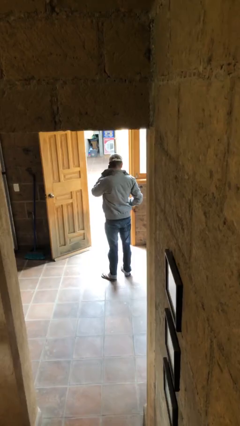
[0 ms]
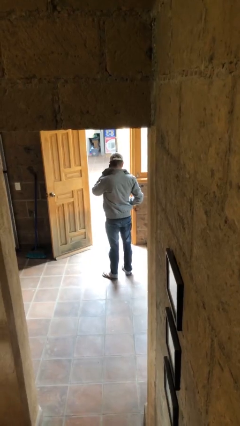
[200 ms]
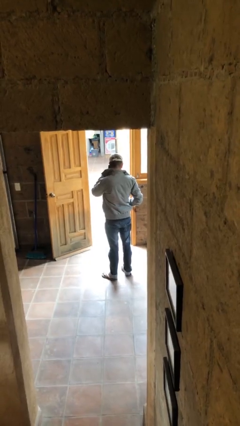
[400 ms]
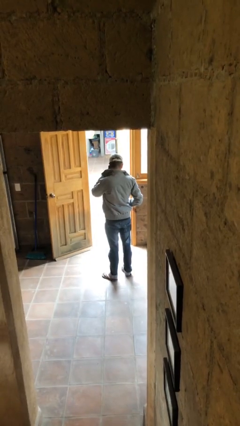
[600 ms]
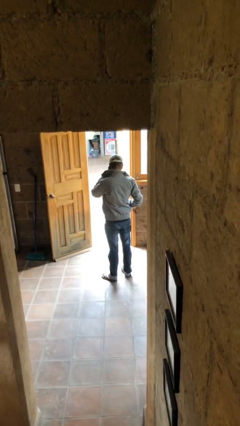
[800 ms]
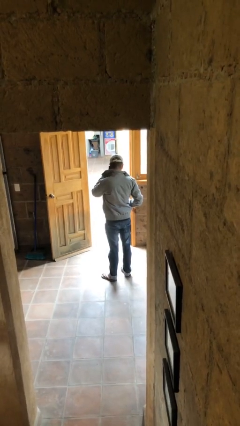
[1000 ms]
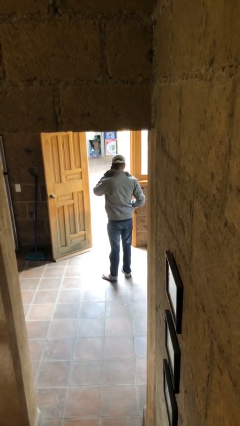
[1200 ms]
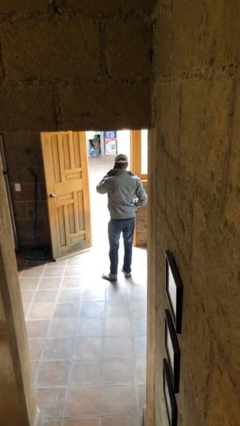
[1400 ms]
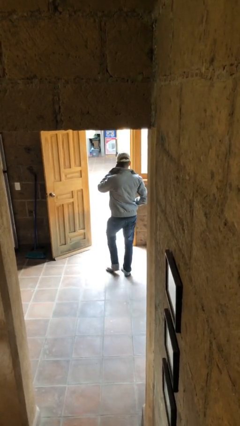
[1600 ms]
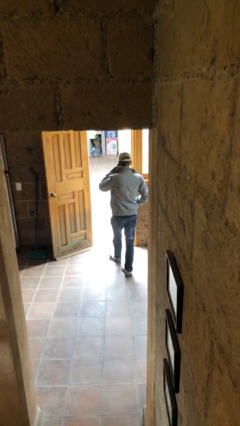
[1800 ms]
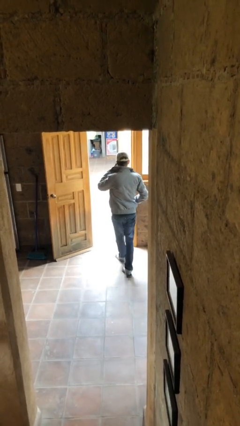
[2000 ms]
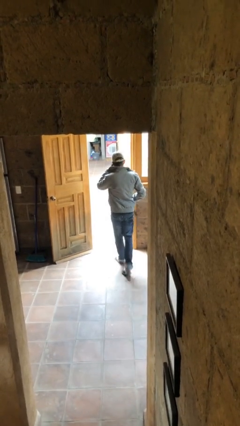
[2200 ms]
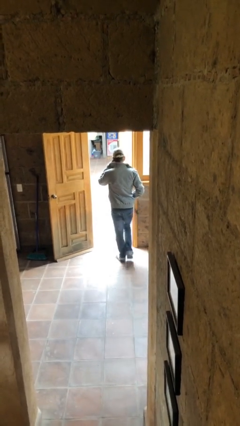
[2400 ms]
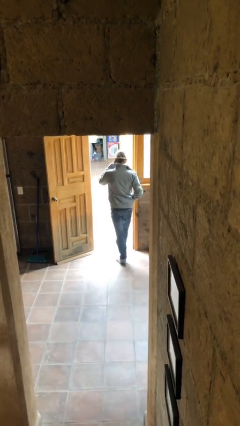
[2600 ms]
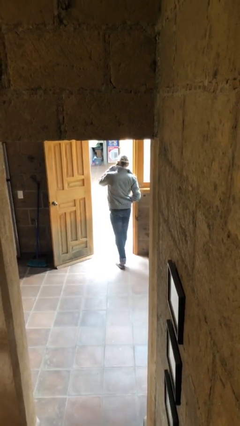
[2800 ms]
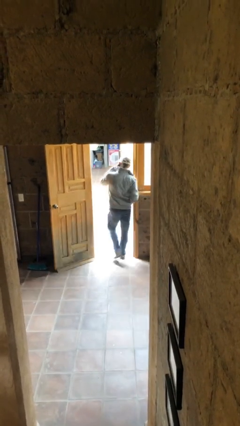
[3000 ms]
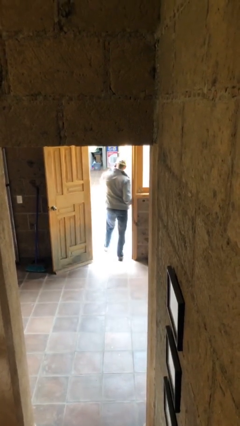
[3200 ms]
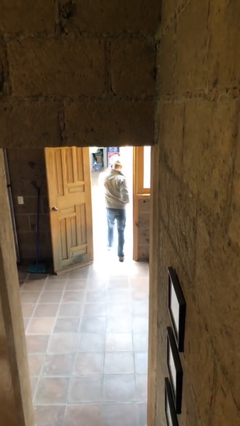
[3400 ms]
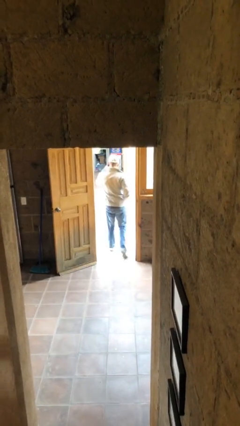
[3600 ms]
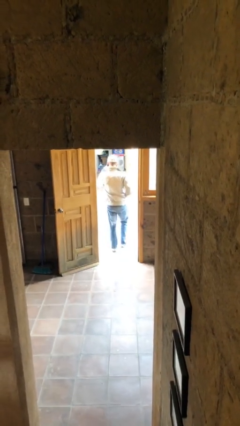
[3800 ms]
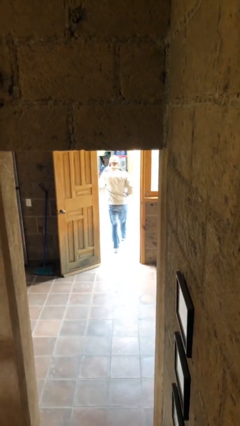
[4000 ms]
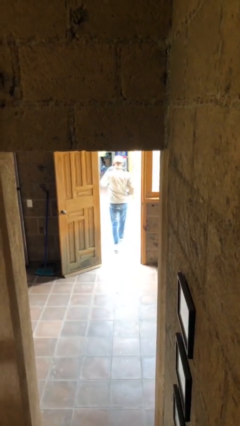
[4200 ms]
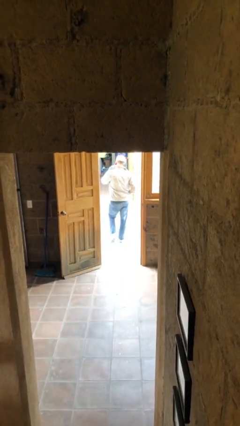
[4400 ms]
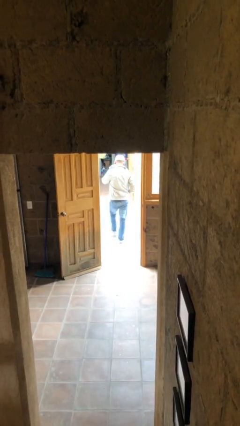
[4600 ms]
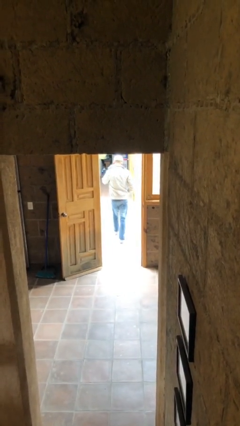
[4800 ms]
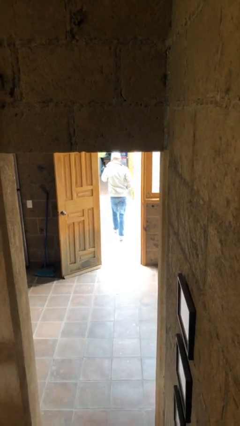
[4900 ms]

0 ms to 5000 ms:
person exits scene through structure

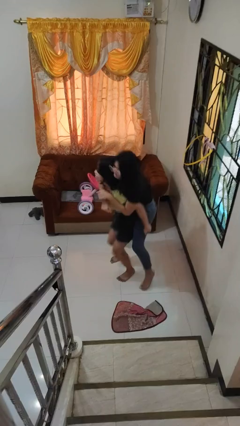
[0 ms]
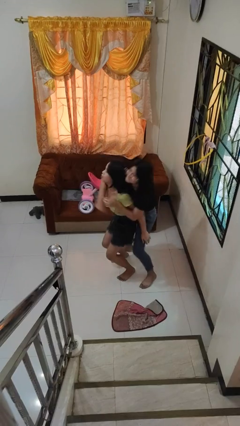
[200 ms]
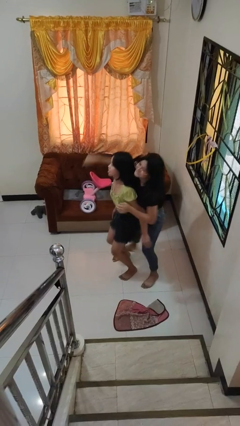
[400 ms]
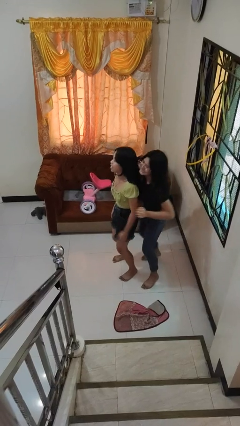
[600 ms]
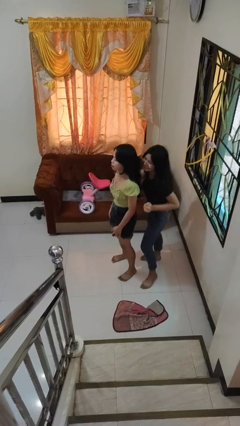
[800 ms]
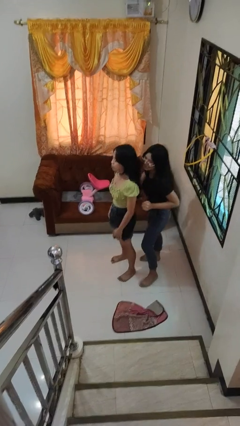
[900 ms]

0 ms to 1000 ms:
person puts down person

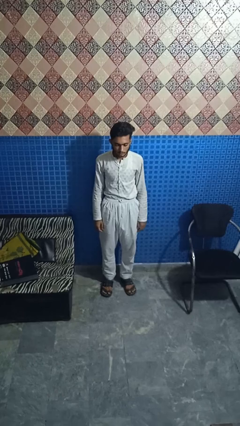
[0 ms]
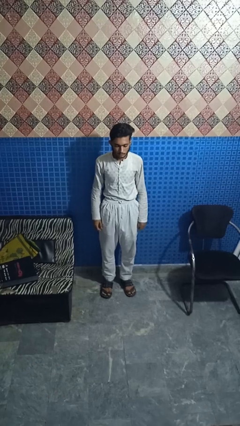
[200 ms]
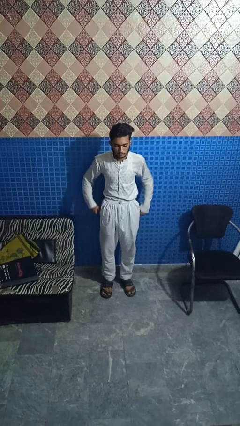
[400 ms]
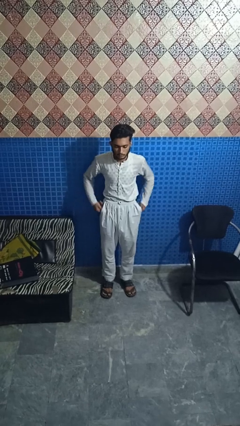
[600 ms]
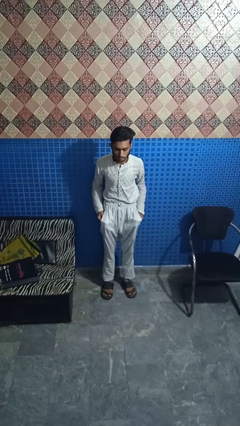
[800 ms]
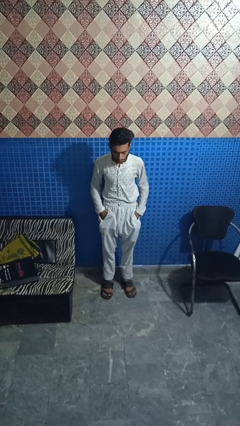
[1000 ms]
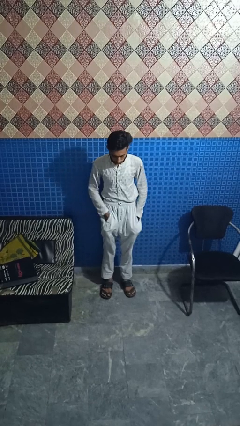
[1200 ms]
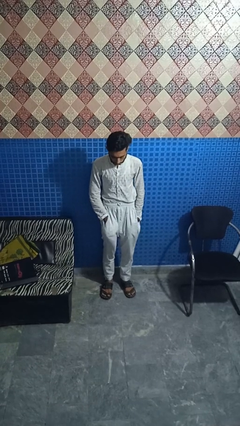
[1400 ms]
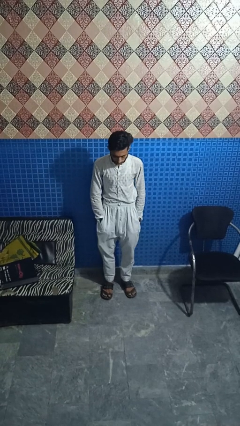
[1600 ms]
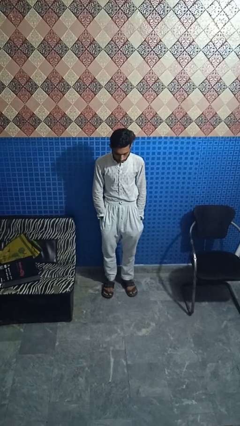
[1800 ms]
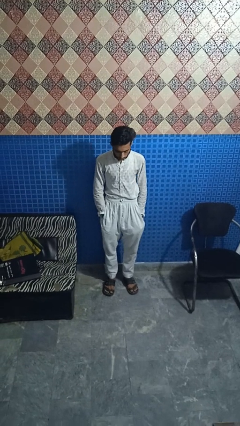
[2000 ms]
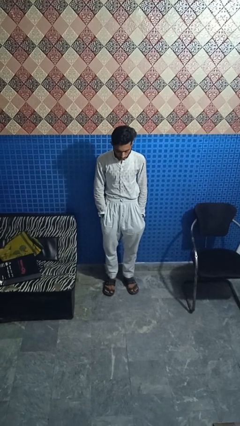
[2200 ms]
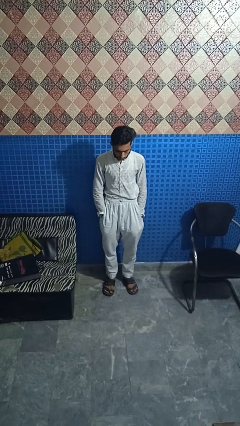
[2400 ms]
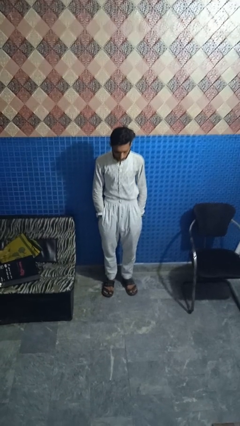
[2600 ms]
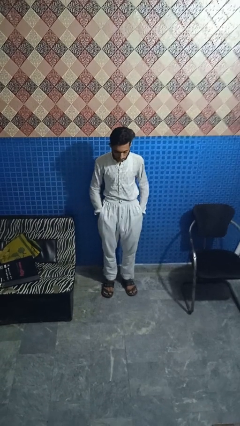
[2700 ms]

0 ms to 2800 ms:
person puts hands in back pockets

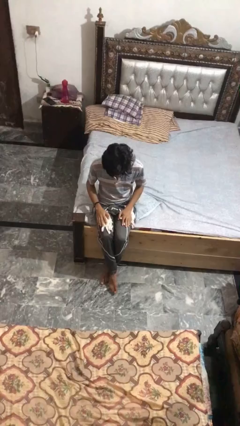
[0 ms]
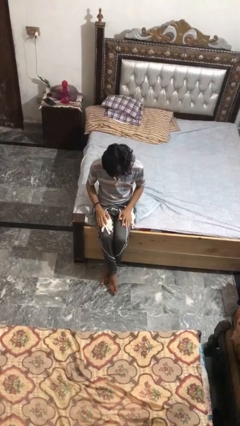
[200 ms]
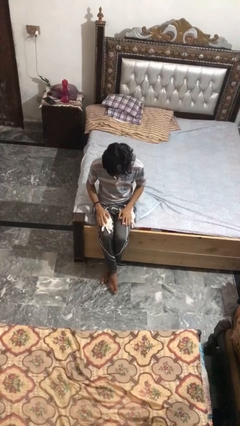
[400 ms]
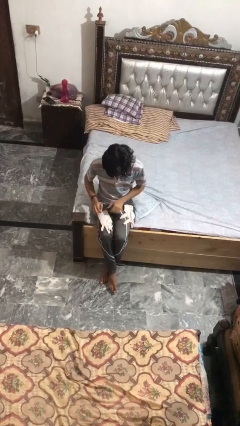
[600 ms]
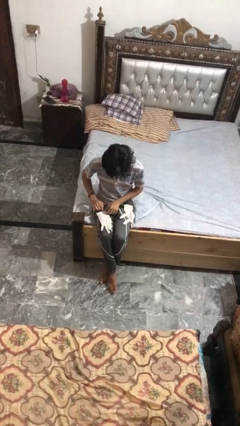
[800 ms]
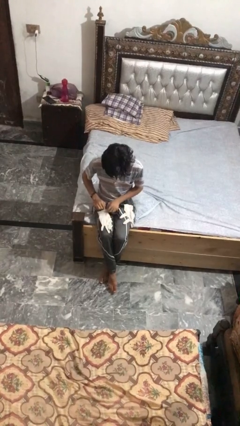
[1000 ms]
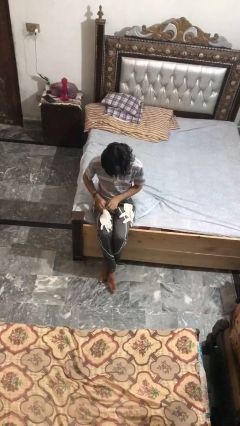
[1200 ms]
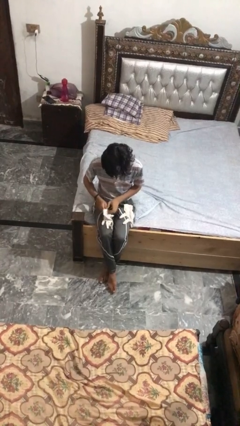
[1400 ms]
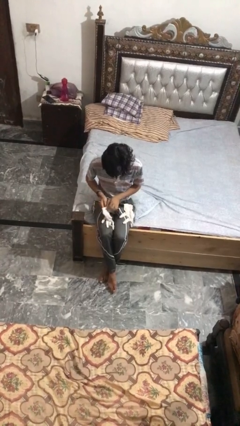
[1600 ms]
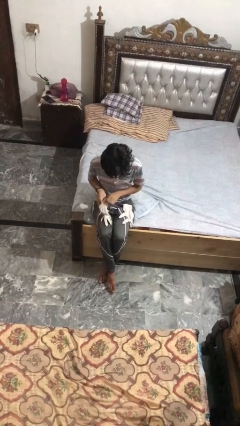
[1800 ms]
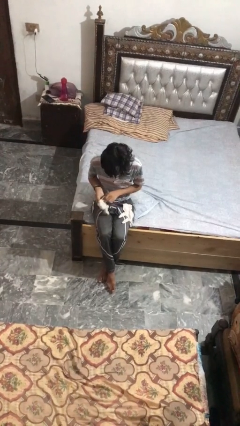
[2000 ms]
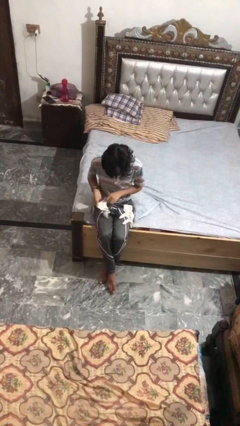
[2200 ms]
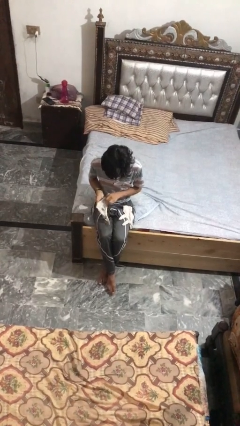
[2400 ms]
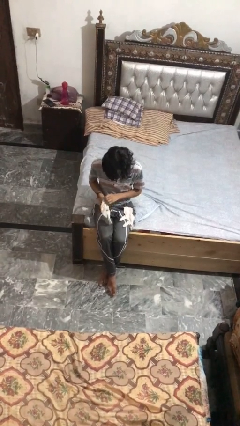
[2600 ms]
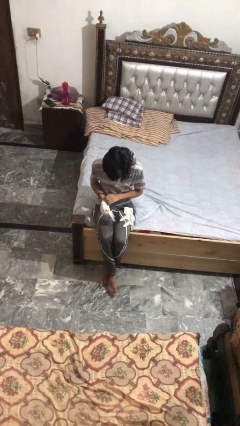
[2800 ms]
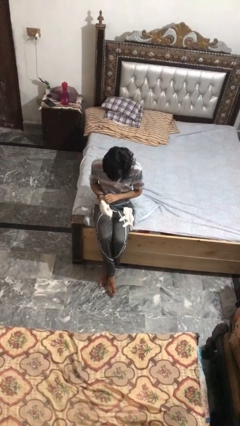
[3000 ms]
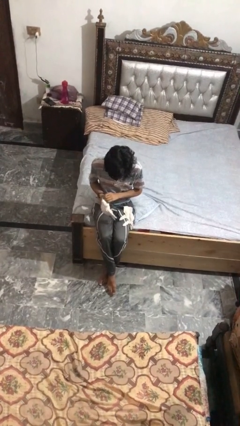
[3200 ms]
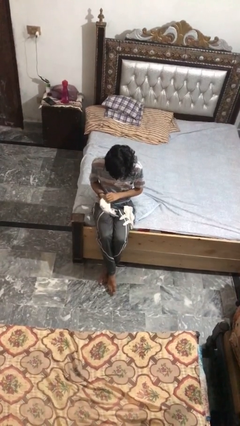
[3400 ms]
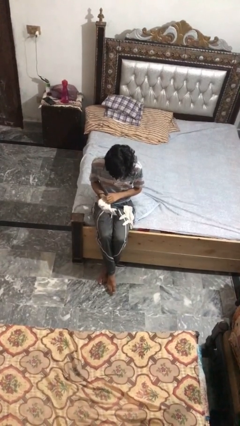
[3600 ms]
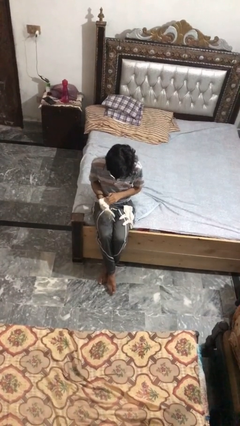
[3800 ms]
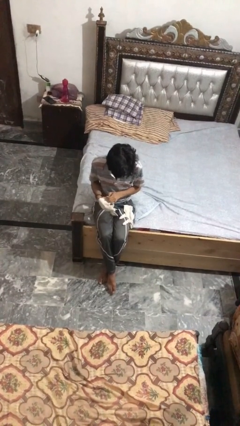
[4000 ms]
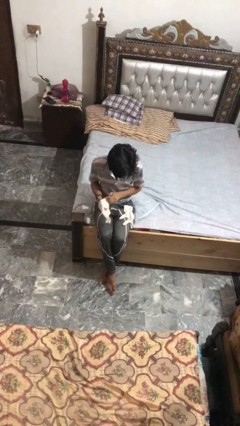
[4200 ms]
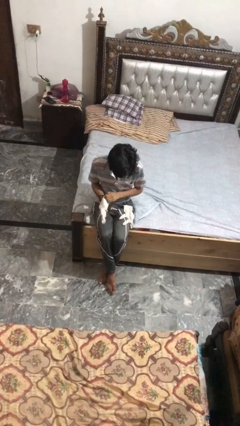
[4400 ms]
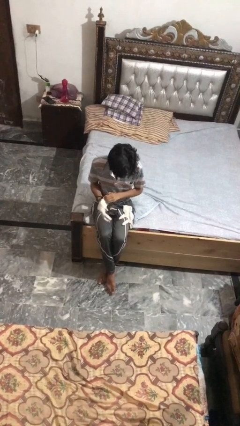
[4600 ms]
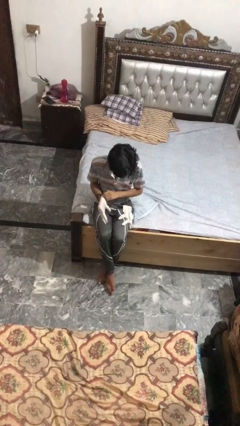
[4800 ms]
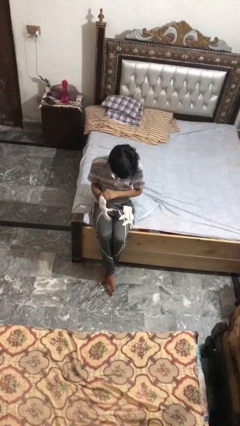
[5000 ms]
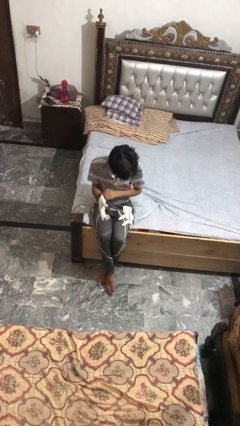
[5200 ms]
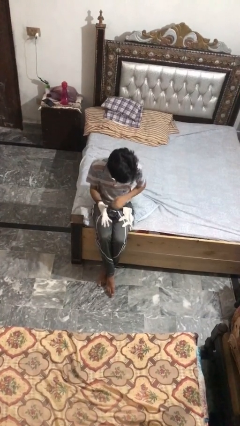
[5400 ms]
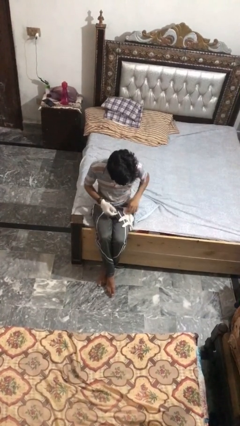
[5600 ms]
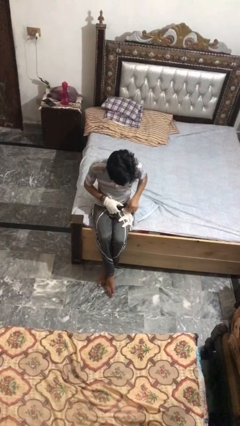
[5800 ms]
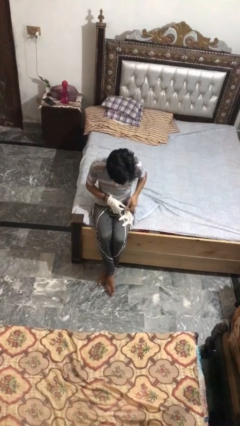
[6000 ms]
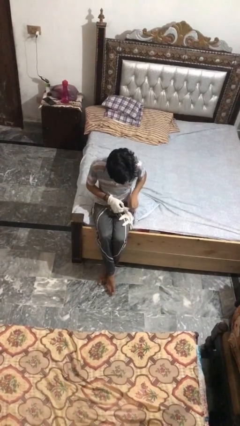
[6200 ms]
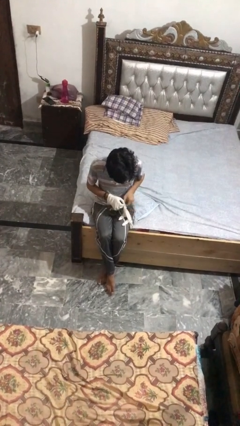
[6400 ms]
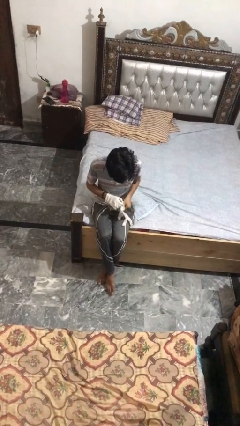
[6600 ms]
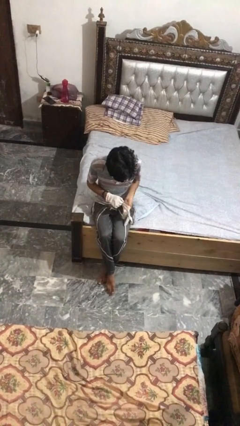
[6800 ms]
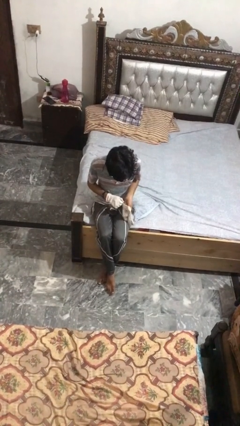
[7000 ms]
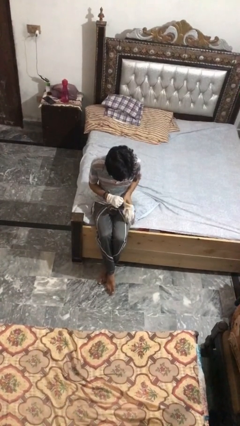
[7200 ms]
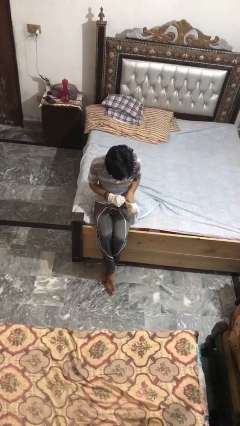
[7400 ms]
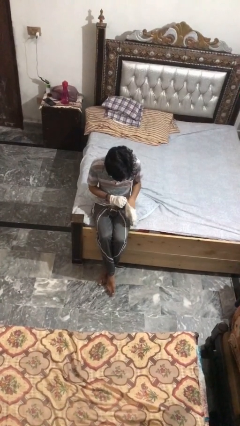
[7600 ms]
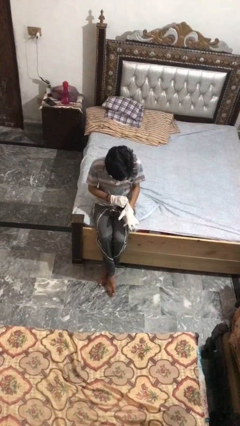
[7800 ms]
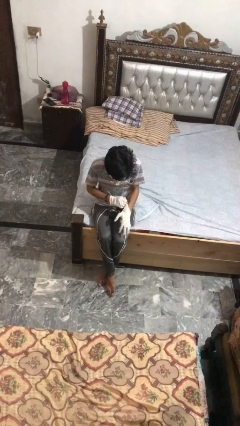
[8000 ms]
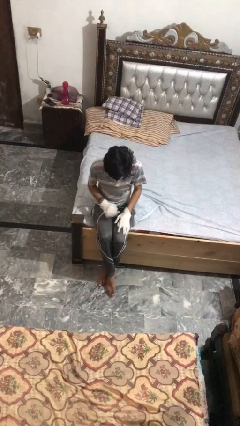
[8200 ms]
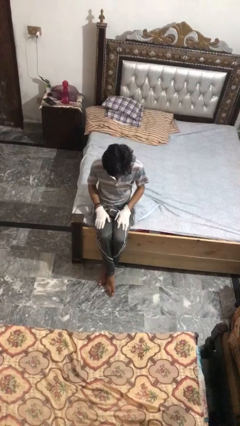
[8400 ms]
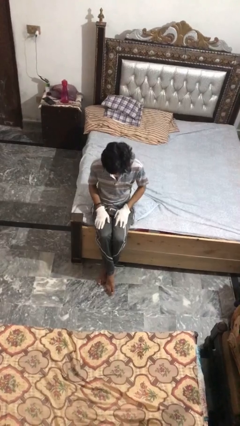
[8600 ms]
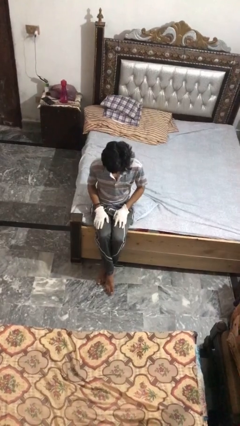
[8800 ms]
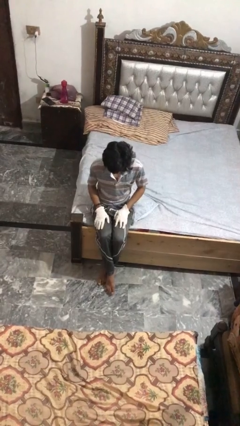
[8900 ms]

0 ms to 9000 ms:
person puts on gloves

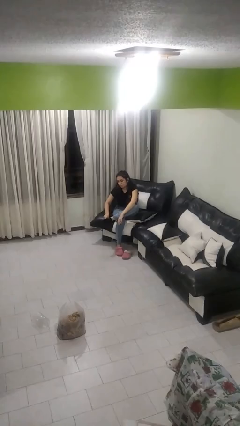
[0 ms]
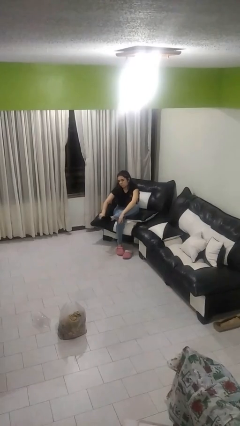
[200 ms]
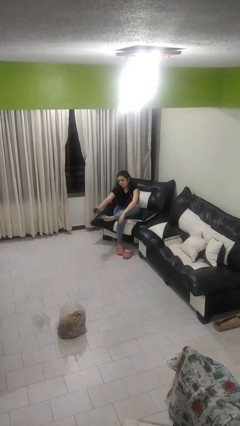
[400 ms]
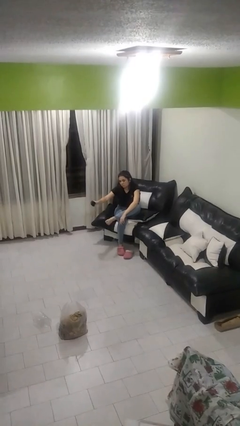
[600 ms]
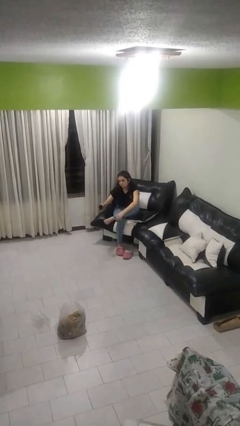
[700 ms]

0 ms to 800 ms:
person takes off socks
